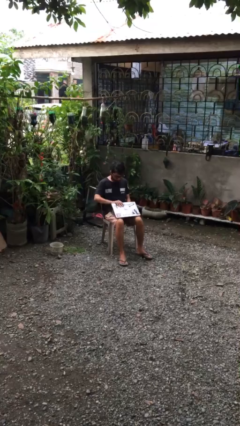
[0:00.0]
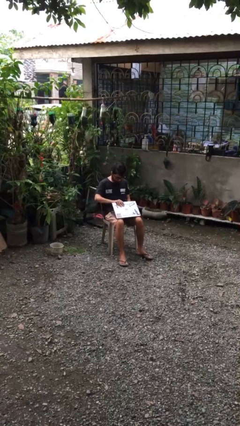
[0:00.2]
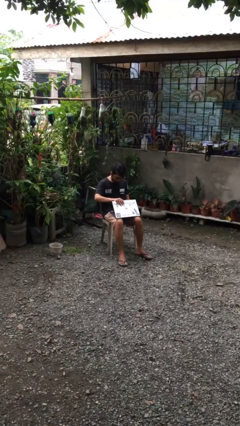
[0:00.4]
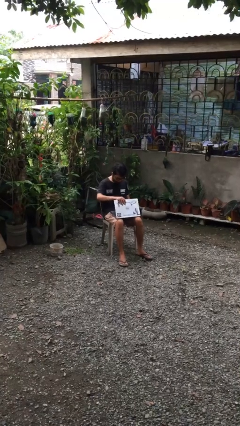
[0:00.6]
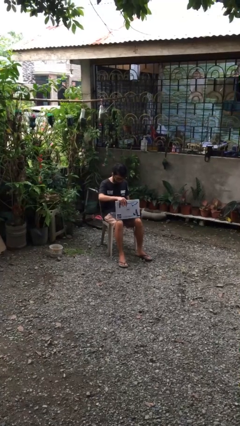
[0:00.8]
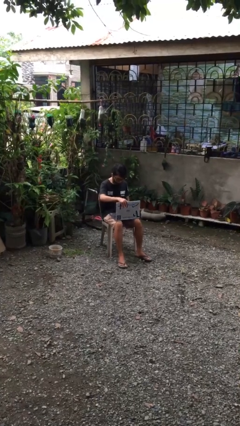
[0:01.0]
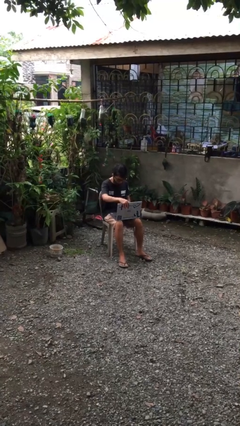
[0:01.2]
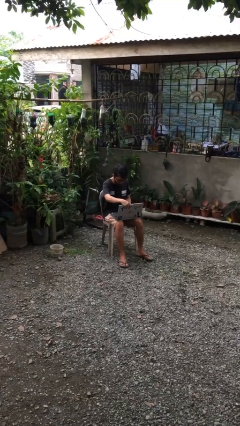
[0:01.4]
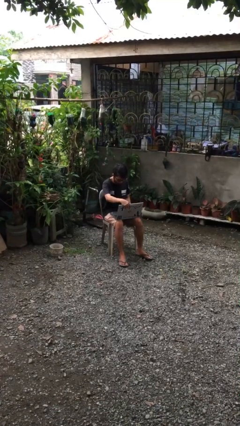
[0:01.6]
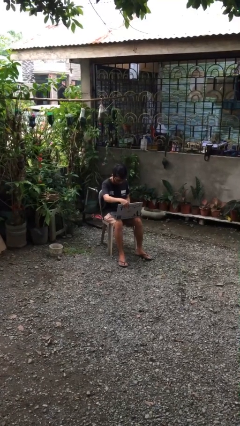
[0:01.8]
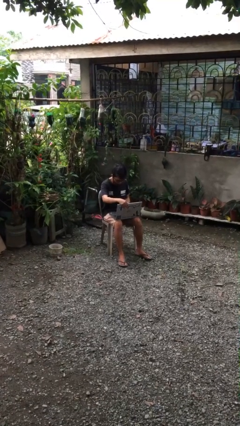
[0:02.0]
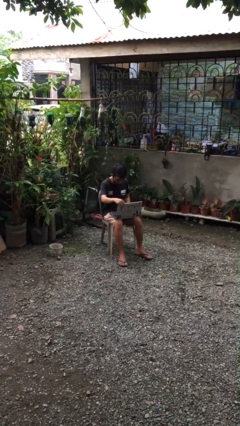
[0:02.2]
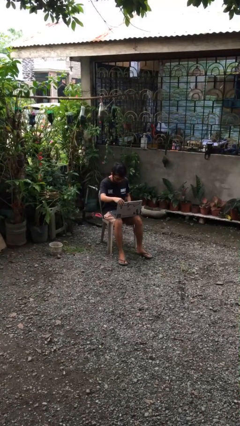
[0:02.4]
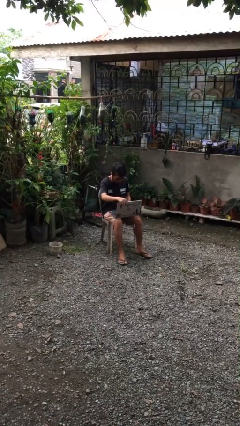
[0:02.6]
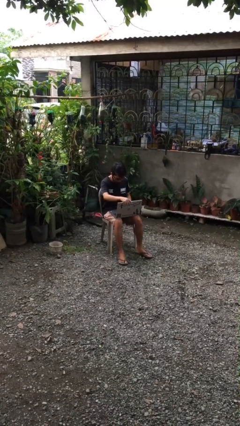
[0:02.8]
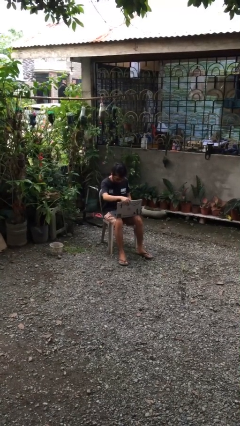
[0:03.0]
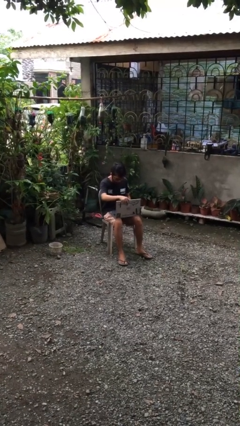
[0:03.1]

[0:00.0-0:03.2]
person interacts with laptop

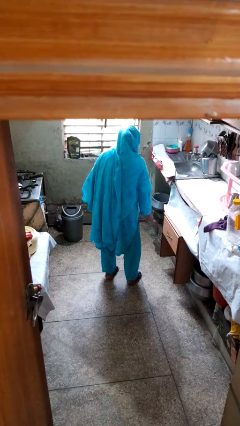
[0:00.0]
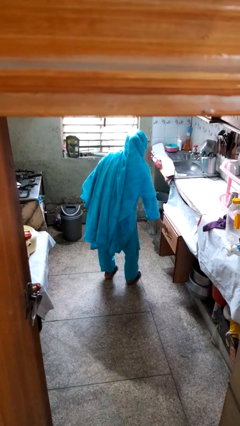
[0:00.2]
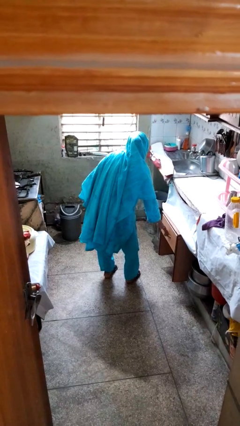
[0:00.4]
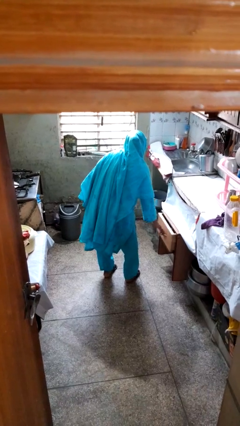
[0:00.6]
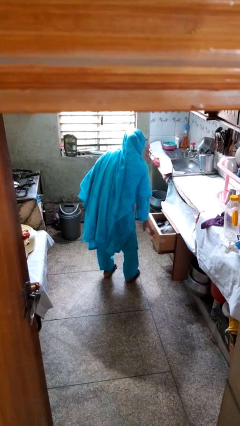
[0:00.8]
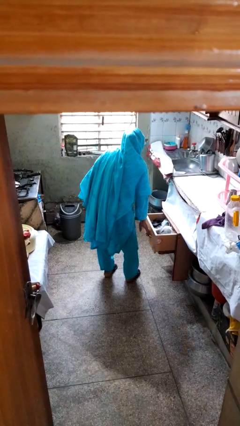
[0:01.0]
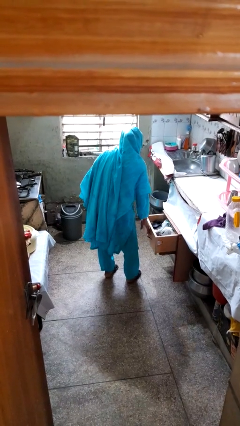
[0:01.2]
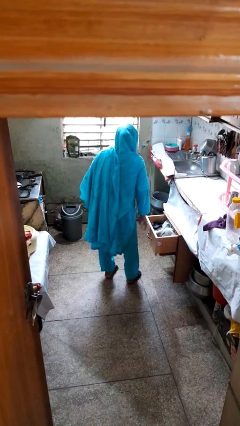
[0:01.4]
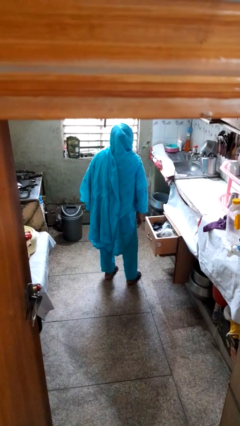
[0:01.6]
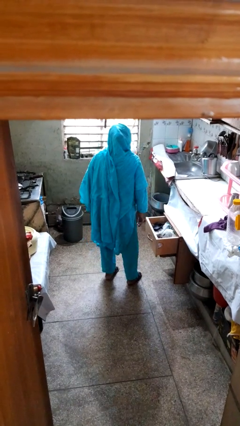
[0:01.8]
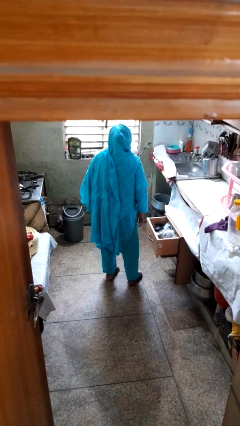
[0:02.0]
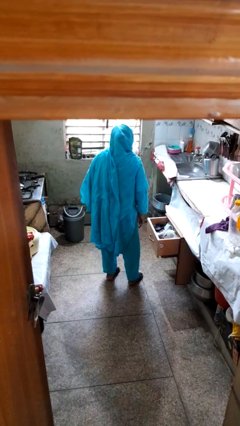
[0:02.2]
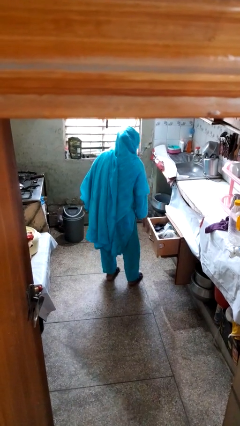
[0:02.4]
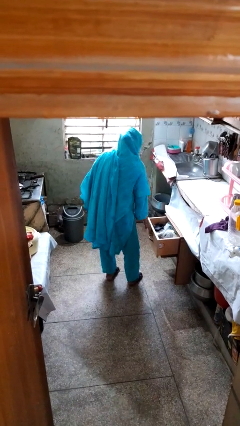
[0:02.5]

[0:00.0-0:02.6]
person opens kitchen drawer

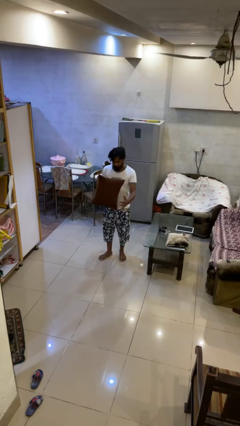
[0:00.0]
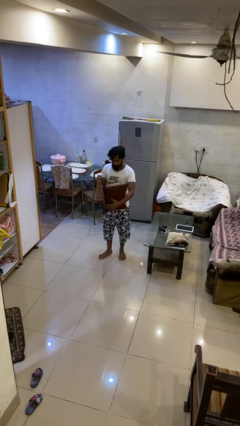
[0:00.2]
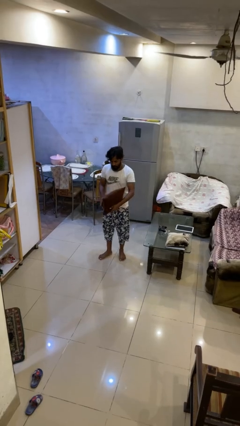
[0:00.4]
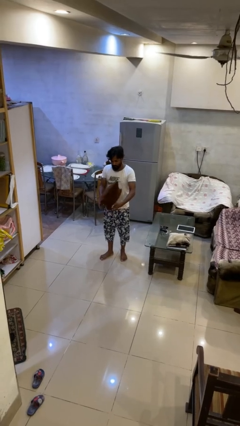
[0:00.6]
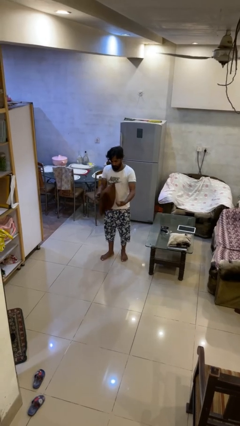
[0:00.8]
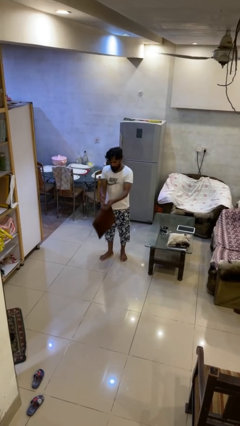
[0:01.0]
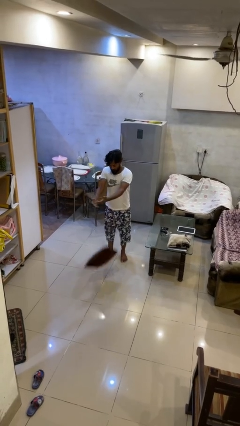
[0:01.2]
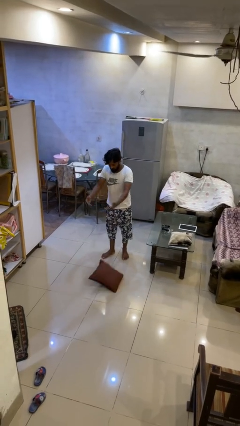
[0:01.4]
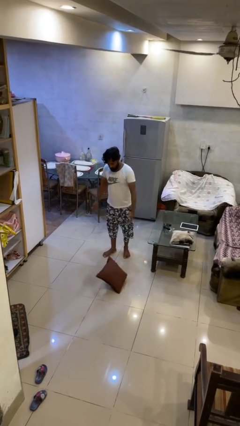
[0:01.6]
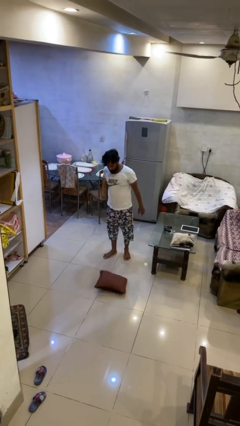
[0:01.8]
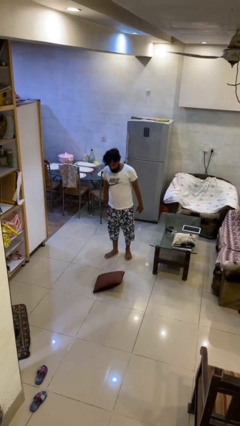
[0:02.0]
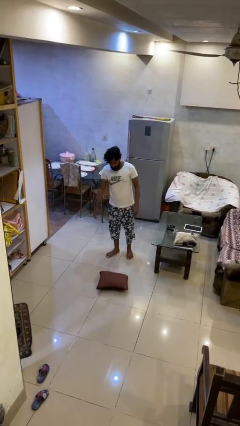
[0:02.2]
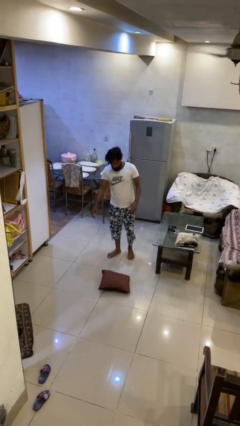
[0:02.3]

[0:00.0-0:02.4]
person drops object

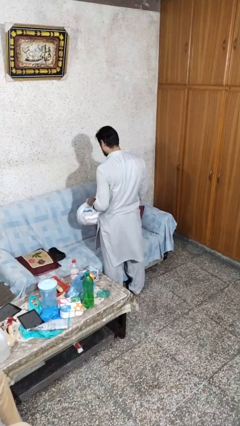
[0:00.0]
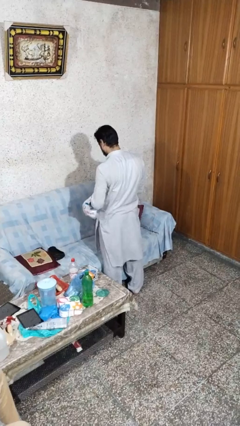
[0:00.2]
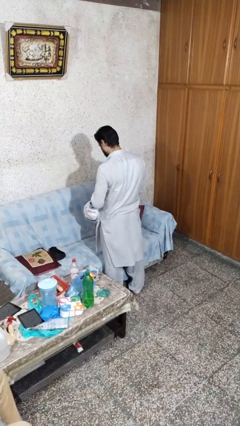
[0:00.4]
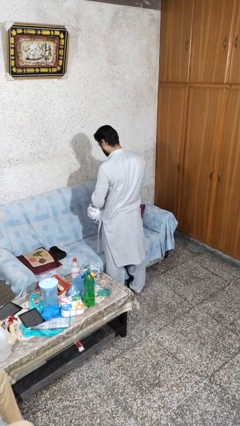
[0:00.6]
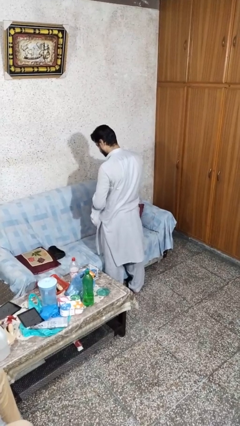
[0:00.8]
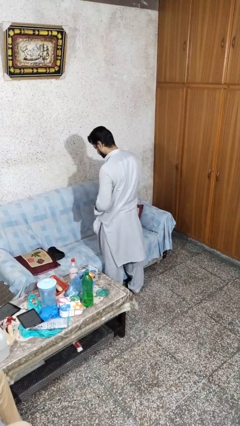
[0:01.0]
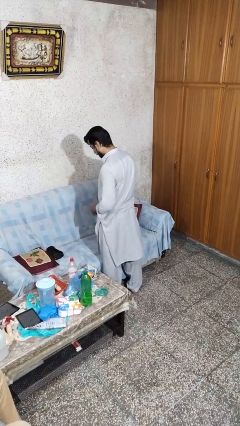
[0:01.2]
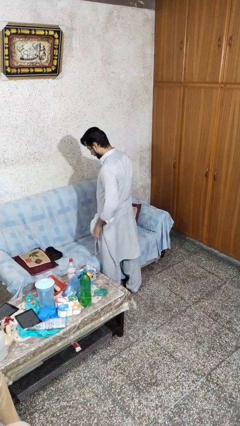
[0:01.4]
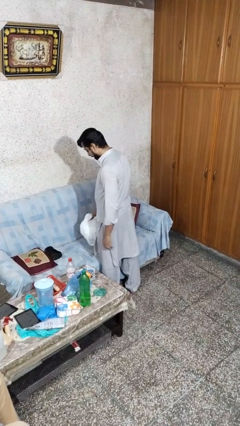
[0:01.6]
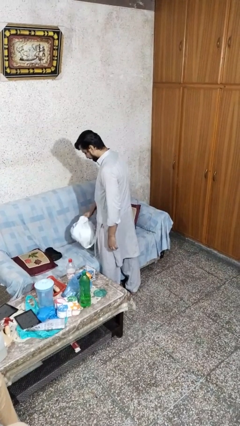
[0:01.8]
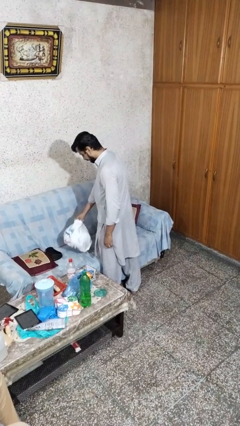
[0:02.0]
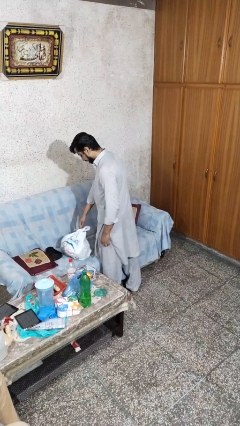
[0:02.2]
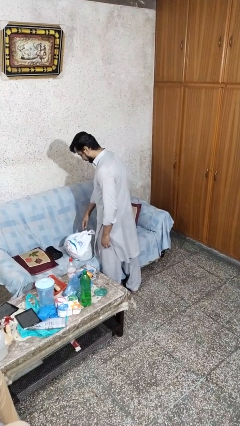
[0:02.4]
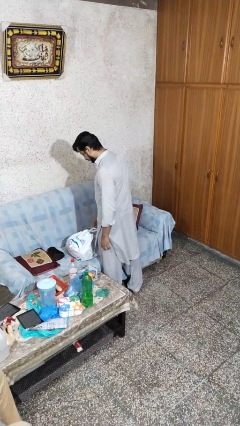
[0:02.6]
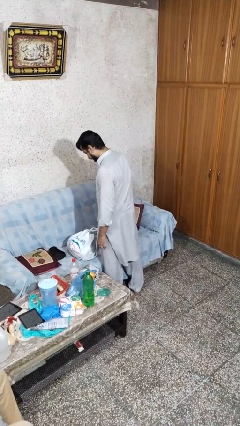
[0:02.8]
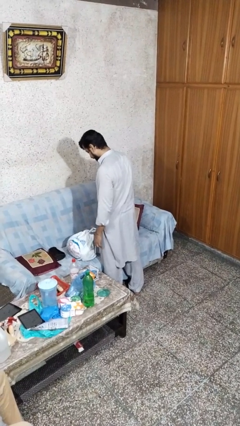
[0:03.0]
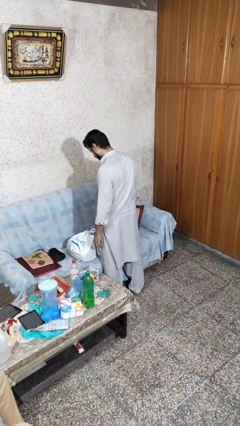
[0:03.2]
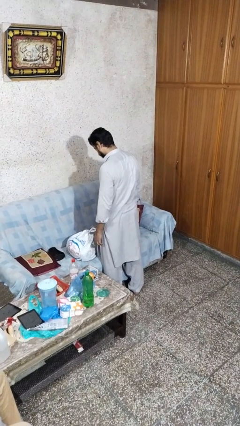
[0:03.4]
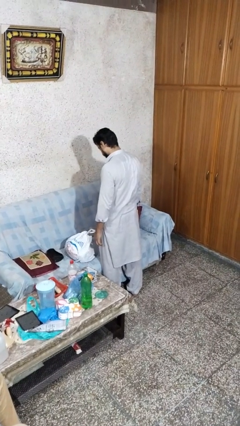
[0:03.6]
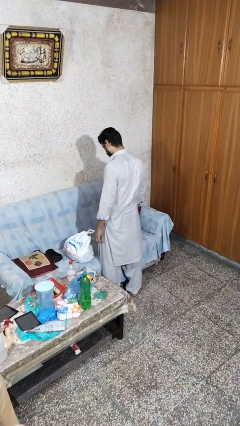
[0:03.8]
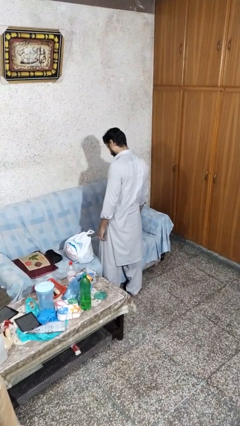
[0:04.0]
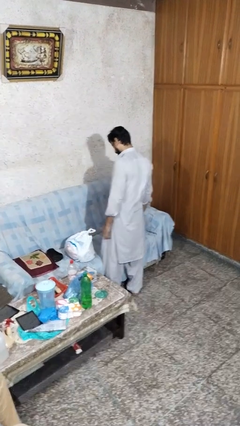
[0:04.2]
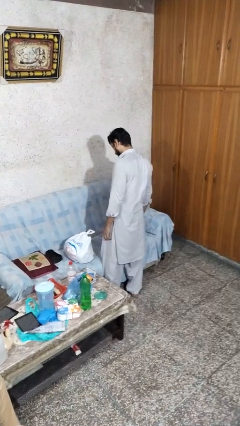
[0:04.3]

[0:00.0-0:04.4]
person puts down object on couch

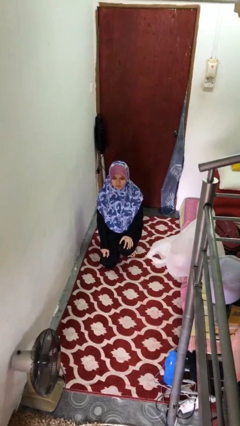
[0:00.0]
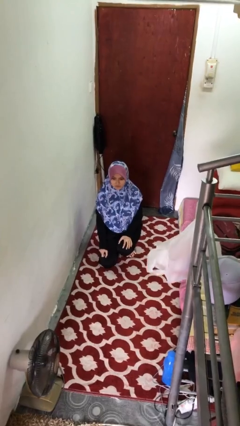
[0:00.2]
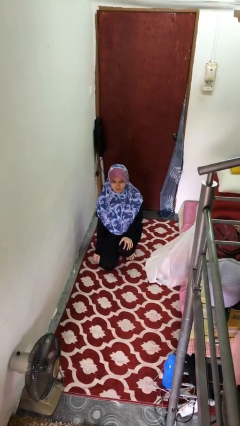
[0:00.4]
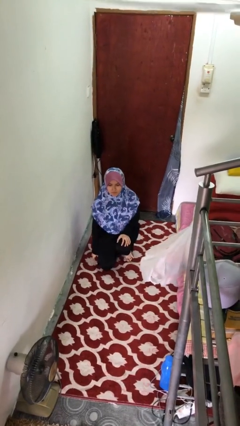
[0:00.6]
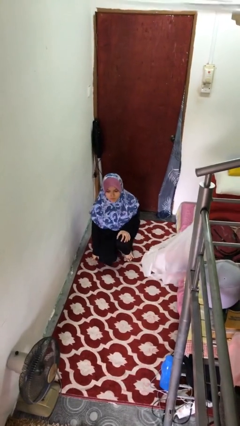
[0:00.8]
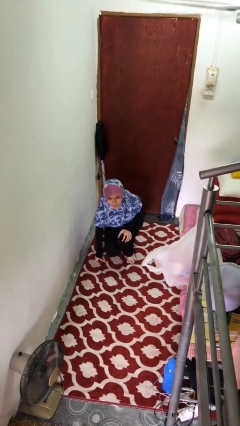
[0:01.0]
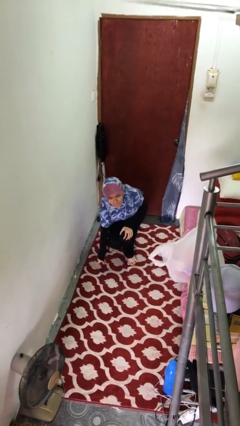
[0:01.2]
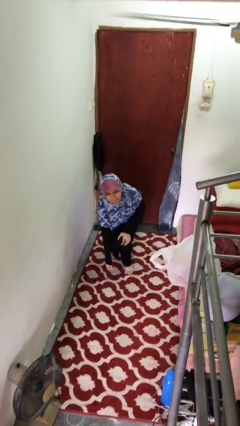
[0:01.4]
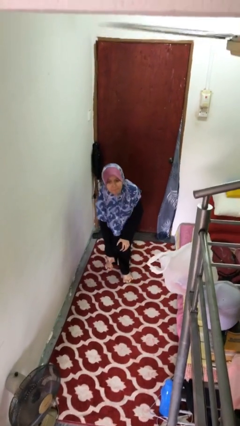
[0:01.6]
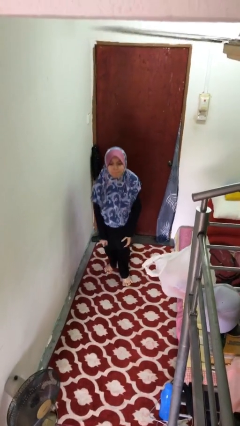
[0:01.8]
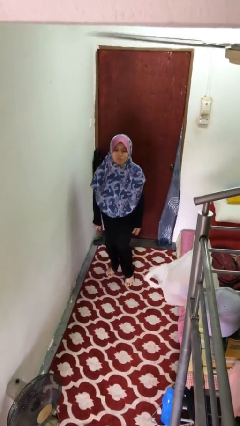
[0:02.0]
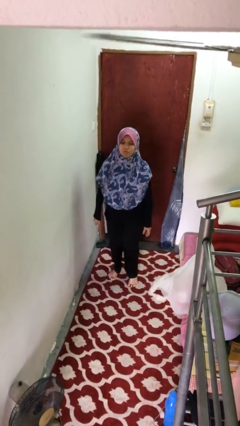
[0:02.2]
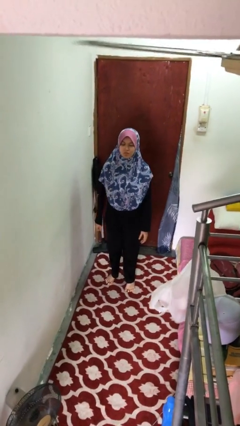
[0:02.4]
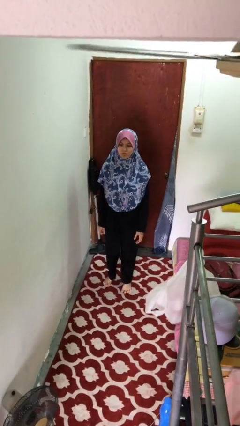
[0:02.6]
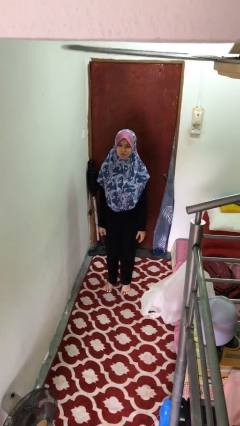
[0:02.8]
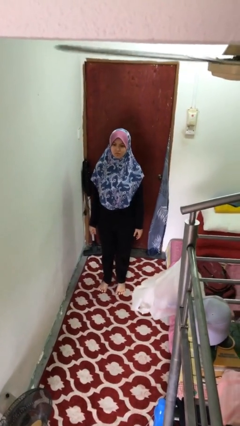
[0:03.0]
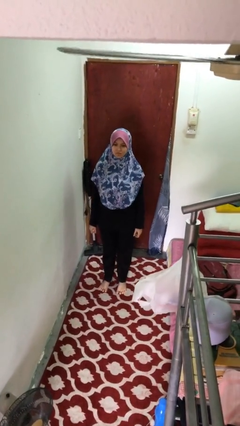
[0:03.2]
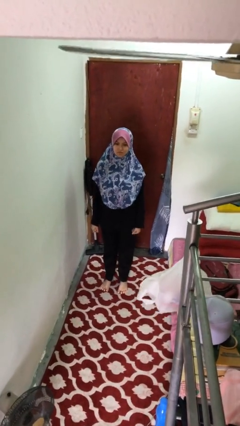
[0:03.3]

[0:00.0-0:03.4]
person stands up from floor

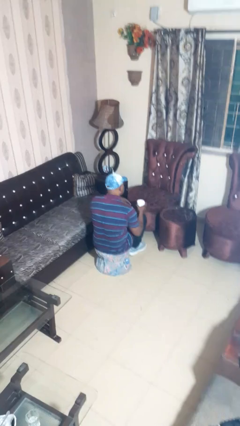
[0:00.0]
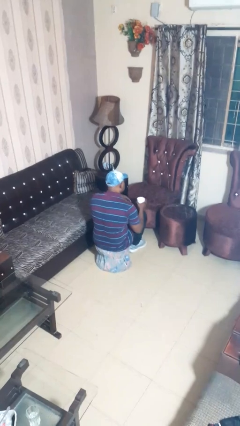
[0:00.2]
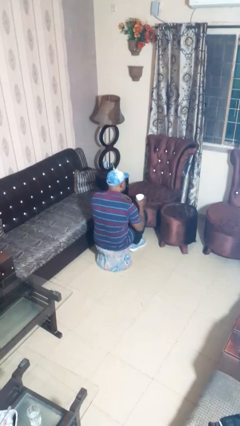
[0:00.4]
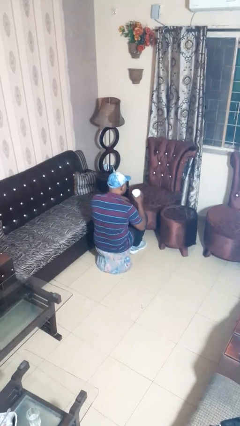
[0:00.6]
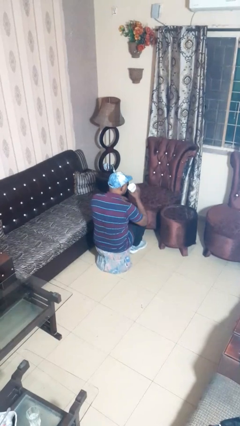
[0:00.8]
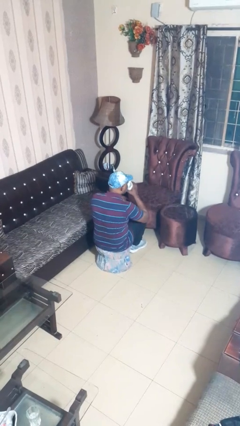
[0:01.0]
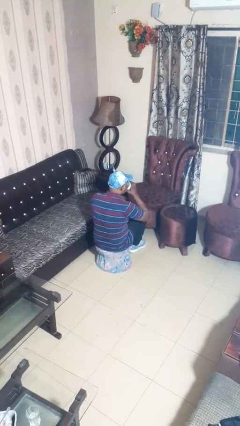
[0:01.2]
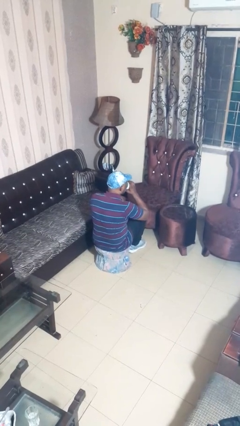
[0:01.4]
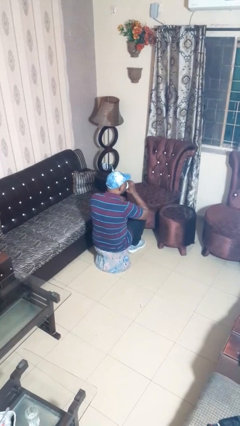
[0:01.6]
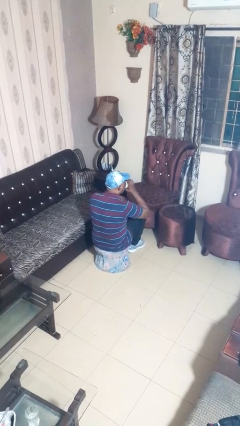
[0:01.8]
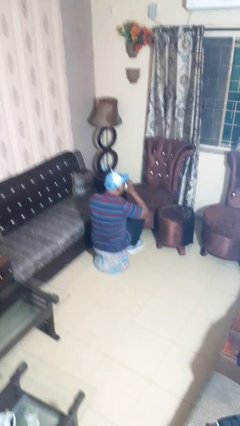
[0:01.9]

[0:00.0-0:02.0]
person drinks from mug
